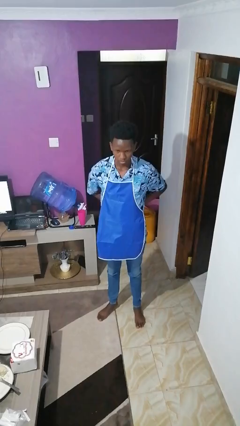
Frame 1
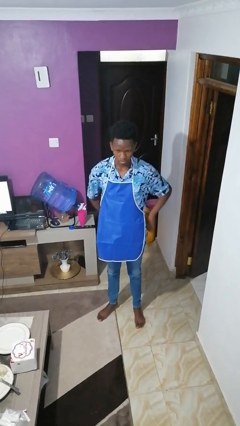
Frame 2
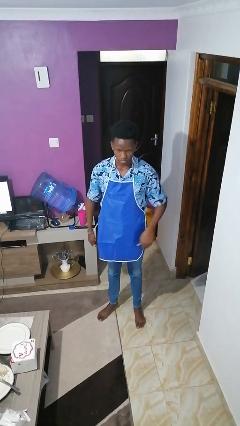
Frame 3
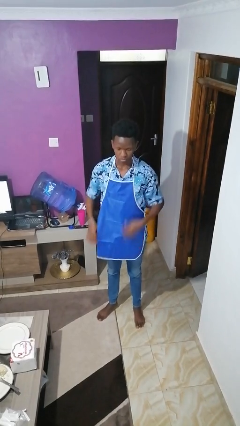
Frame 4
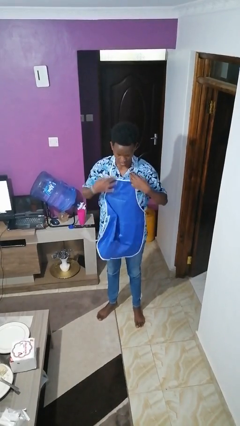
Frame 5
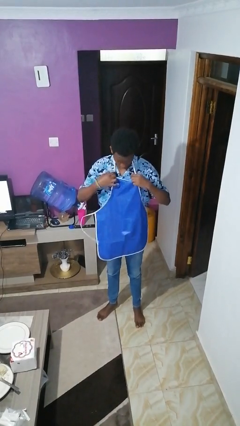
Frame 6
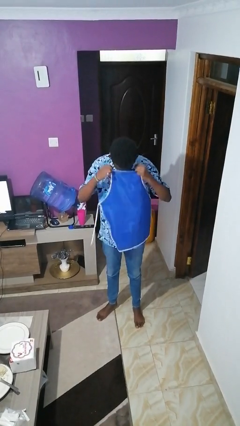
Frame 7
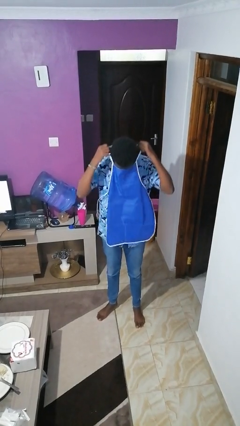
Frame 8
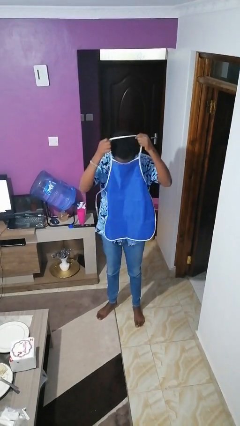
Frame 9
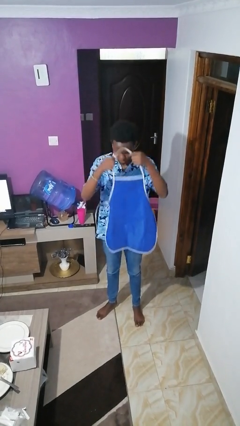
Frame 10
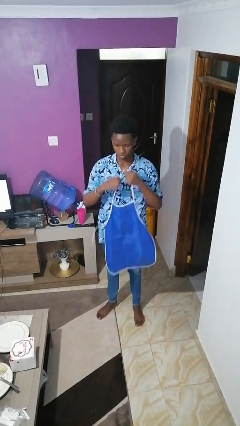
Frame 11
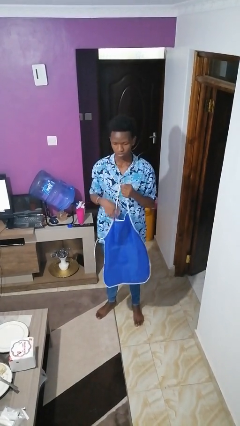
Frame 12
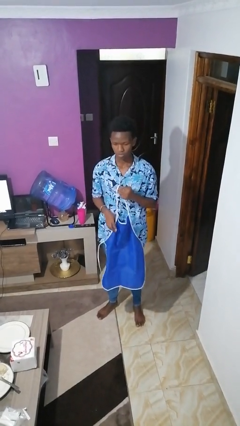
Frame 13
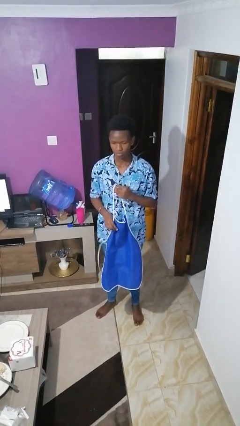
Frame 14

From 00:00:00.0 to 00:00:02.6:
person takes off apron

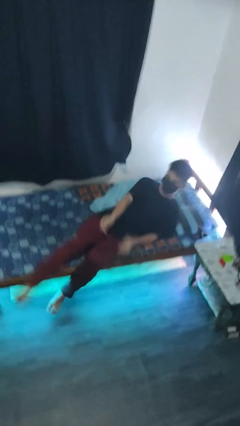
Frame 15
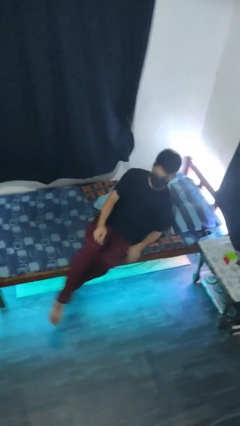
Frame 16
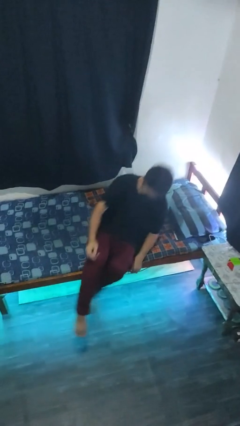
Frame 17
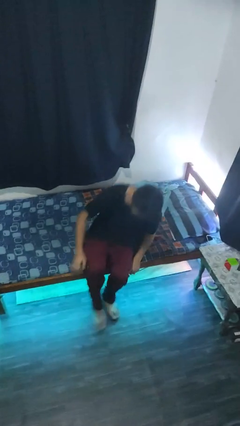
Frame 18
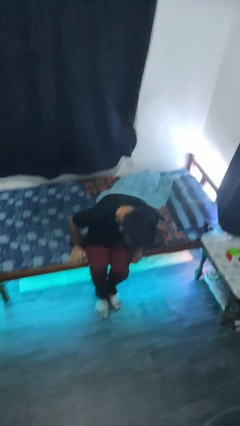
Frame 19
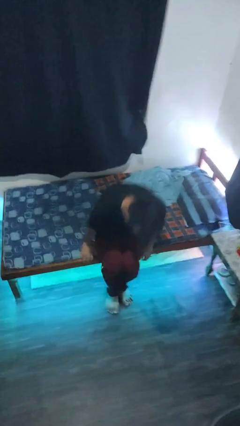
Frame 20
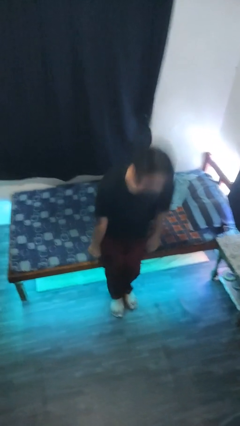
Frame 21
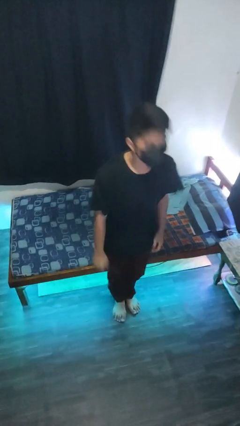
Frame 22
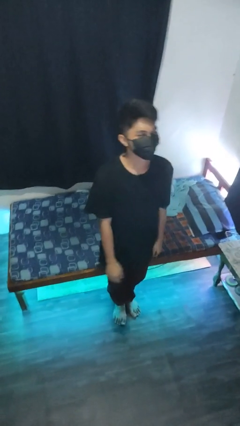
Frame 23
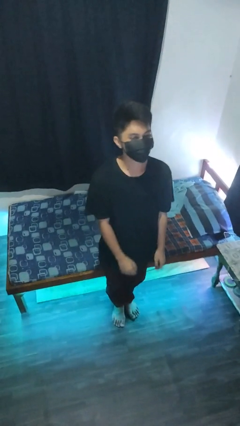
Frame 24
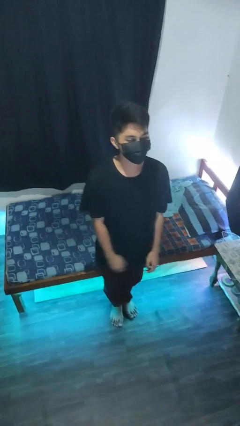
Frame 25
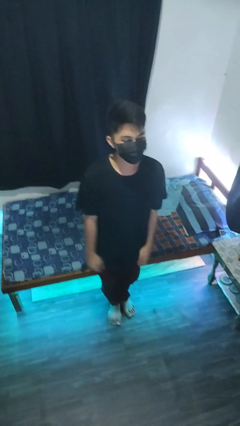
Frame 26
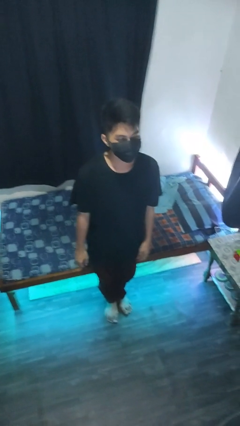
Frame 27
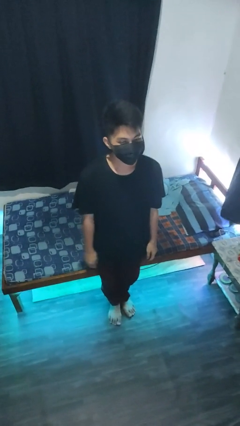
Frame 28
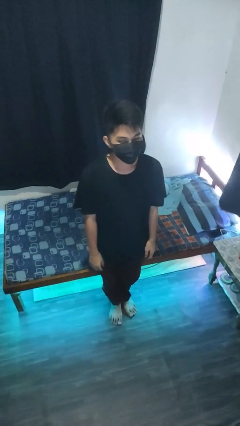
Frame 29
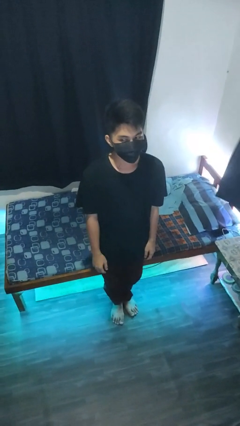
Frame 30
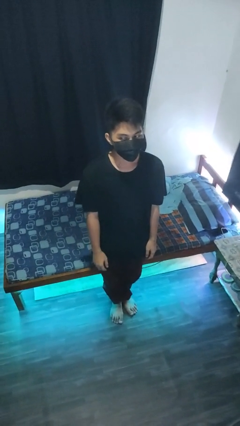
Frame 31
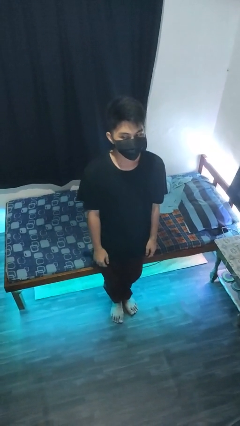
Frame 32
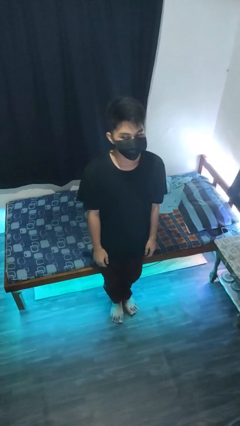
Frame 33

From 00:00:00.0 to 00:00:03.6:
person stands up

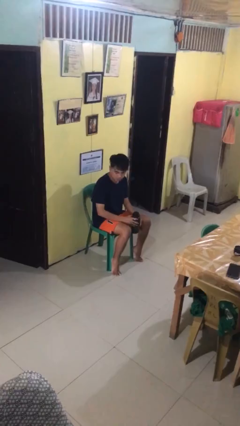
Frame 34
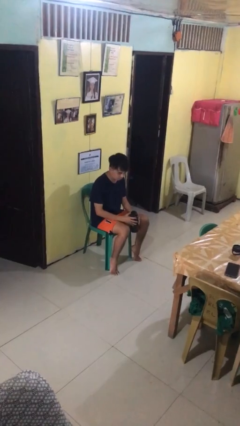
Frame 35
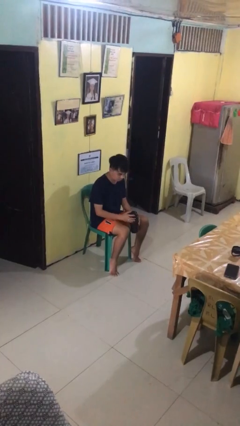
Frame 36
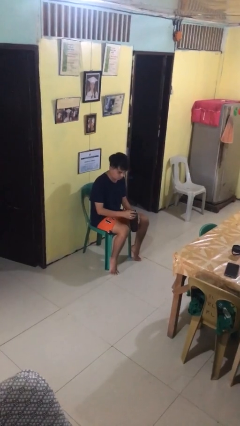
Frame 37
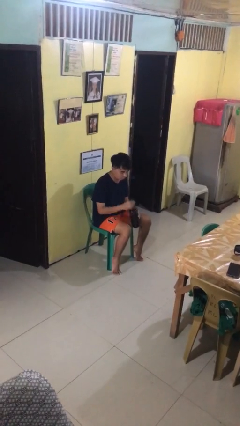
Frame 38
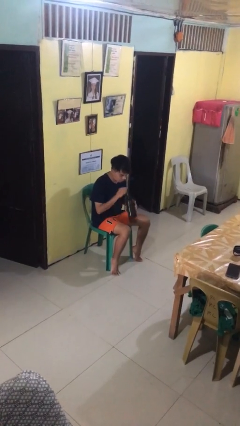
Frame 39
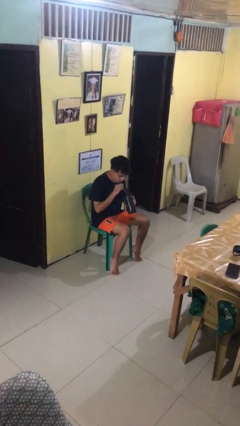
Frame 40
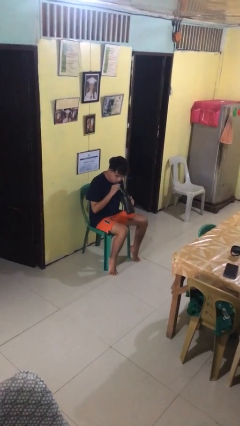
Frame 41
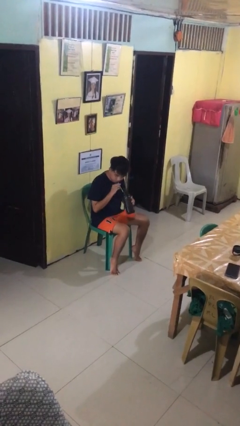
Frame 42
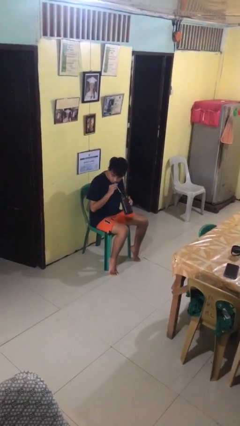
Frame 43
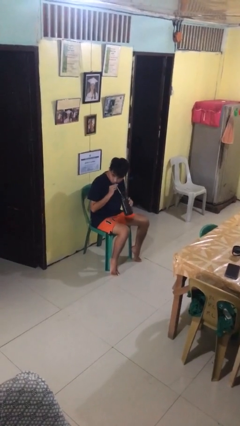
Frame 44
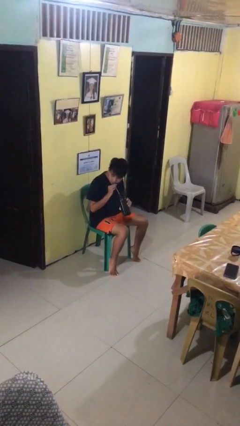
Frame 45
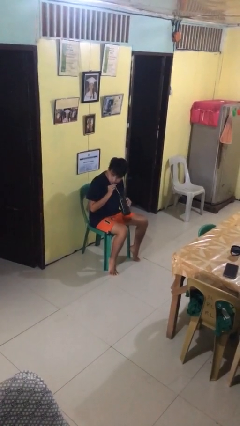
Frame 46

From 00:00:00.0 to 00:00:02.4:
person drinks from straw

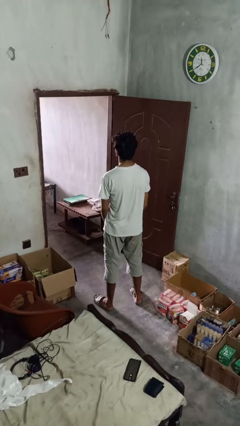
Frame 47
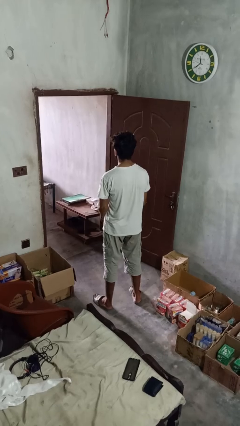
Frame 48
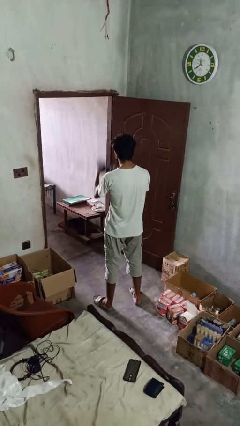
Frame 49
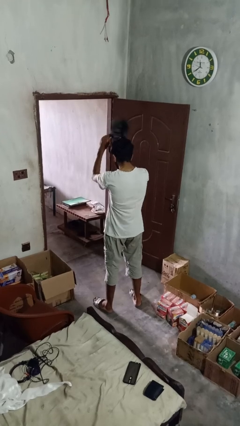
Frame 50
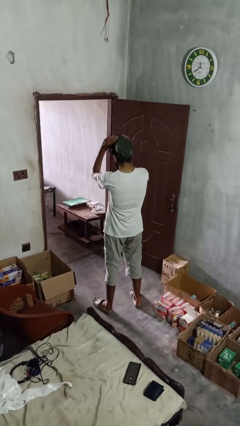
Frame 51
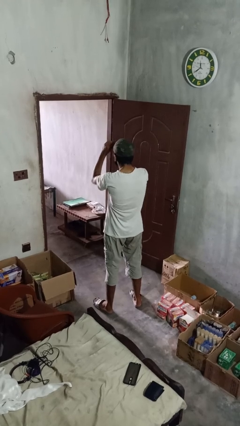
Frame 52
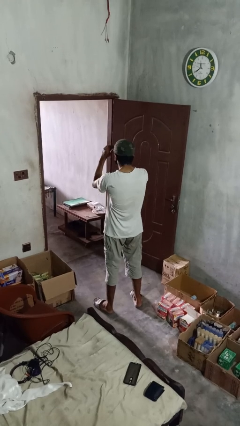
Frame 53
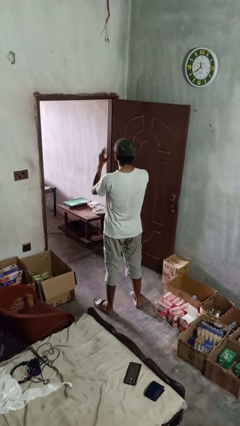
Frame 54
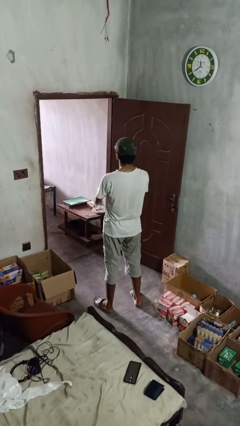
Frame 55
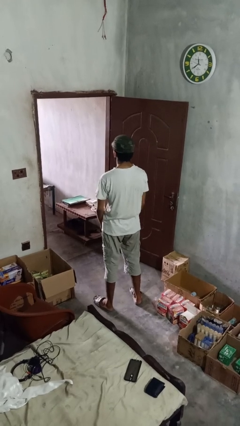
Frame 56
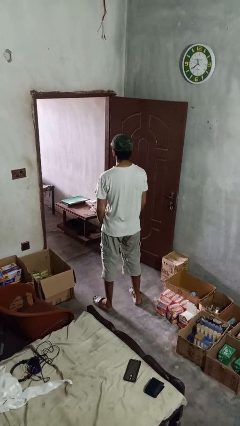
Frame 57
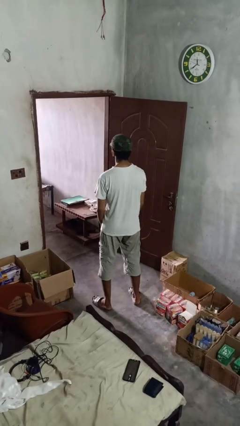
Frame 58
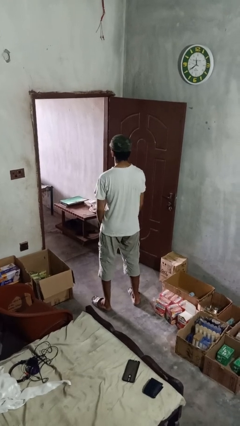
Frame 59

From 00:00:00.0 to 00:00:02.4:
person puts on hat

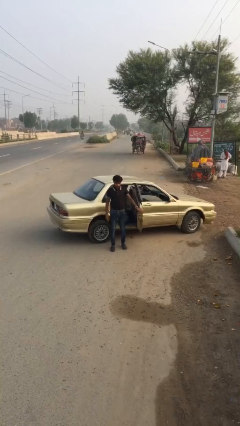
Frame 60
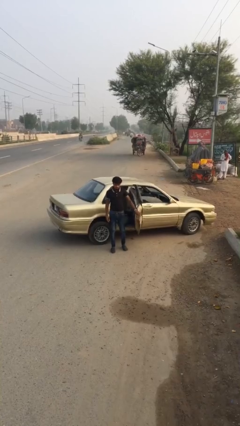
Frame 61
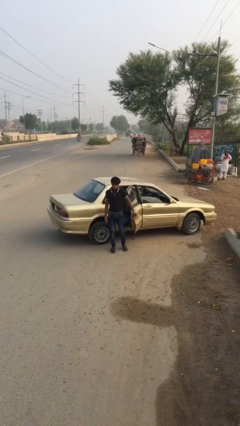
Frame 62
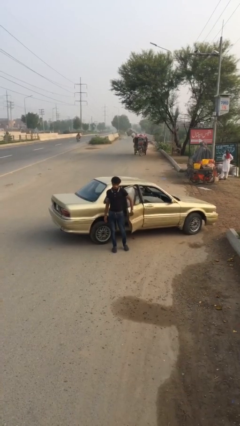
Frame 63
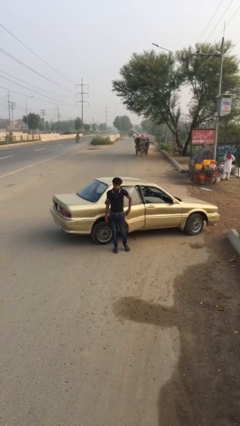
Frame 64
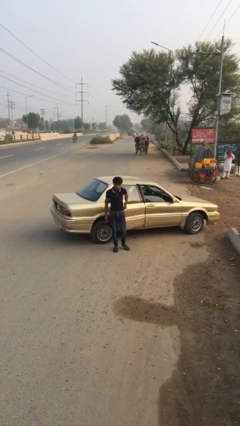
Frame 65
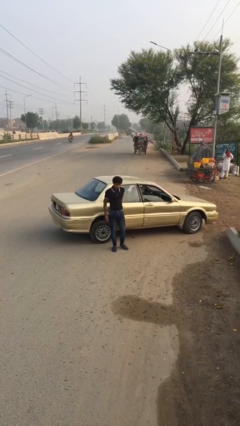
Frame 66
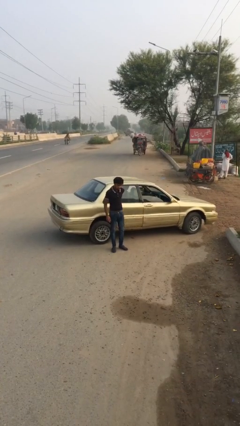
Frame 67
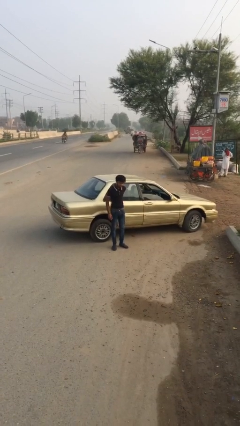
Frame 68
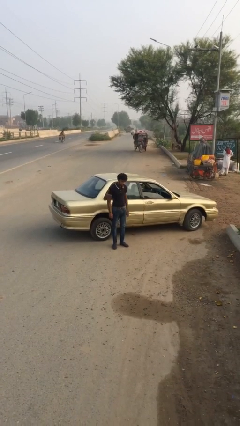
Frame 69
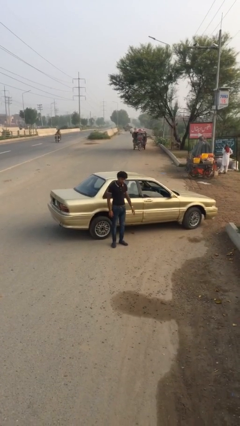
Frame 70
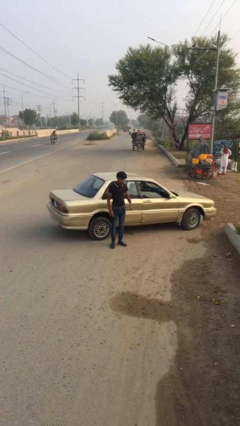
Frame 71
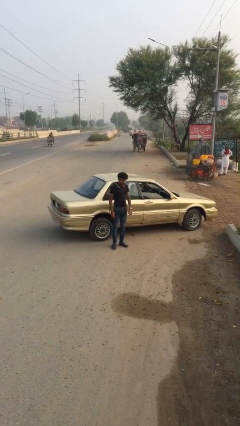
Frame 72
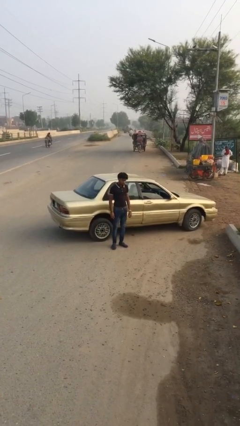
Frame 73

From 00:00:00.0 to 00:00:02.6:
person closes car door

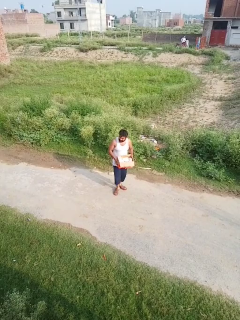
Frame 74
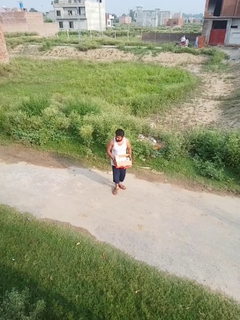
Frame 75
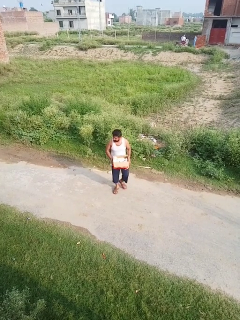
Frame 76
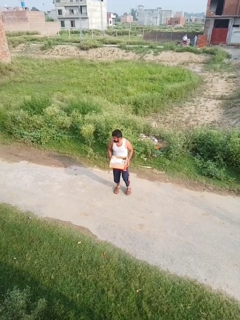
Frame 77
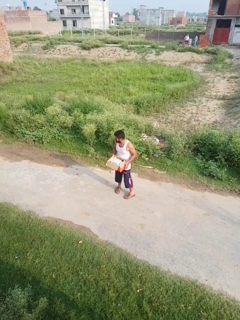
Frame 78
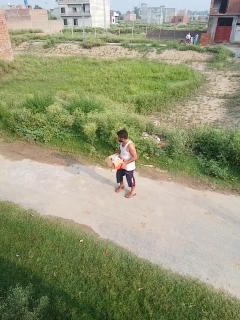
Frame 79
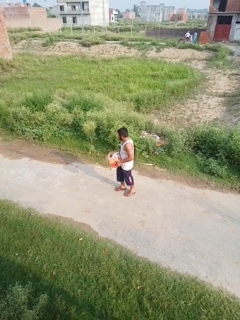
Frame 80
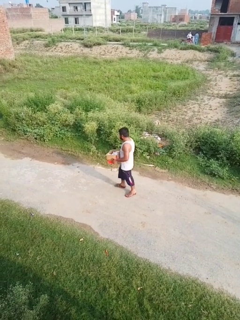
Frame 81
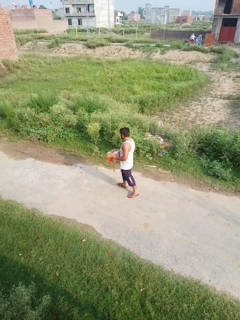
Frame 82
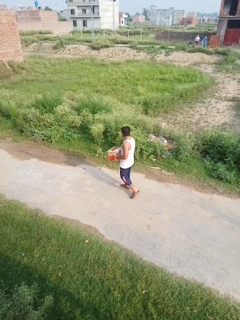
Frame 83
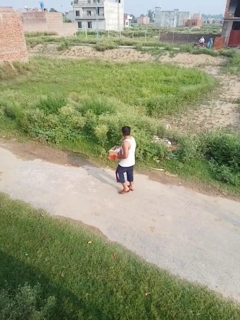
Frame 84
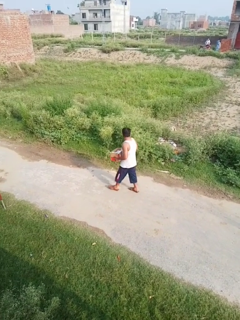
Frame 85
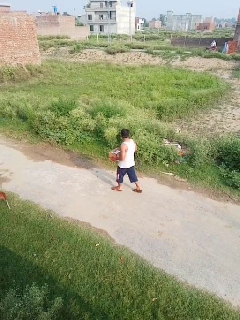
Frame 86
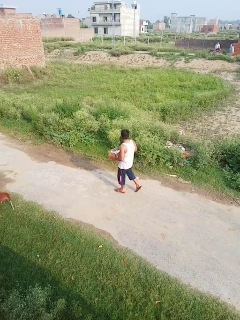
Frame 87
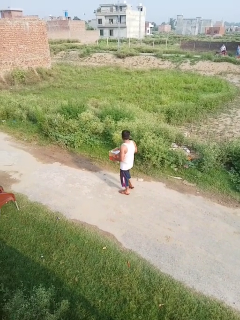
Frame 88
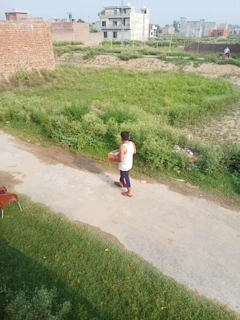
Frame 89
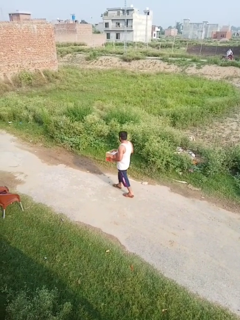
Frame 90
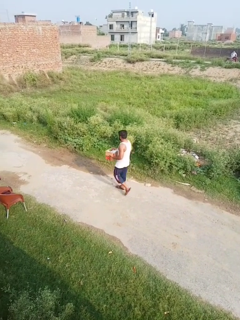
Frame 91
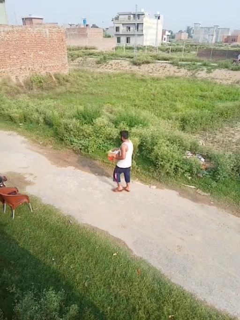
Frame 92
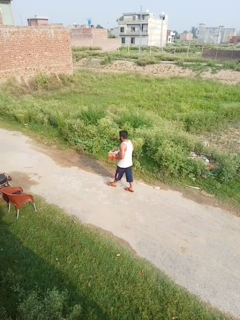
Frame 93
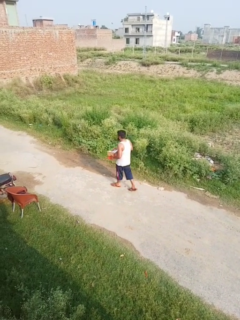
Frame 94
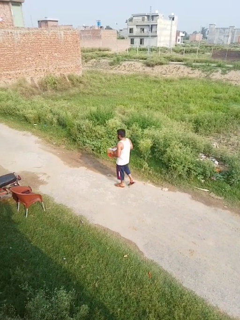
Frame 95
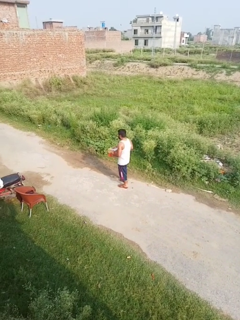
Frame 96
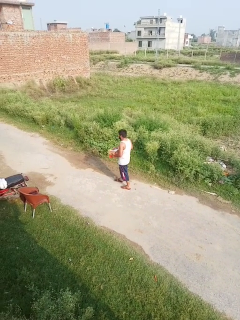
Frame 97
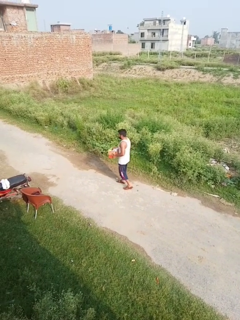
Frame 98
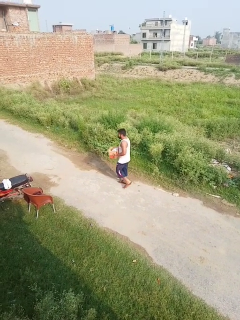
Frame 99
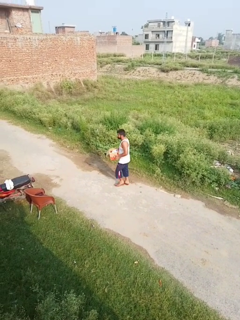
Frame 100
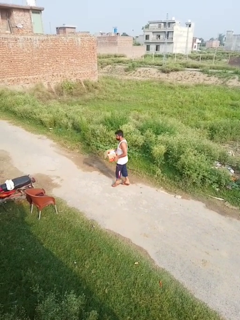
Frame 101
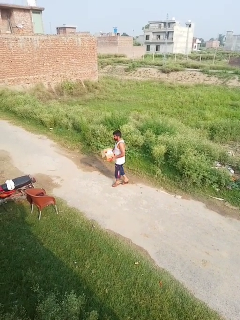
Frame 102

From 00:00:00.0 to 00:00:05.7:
person carries laundry basket
